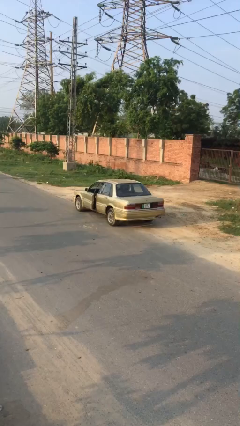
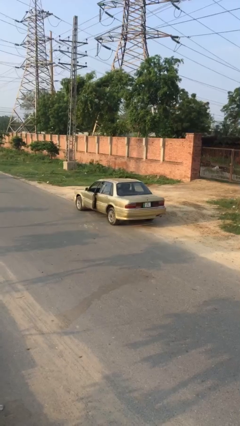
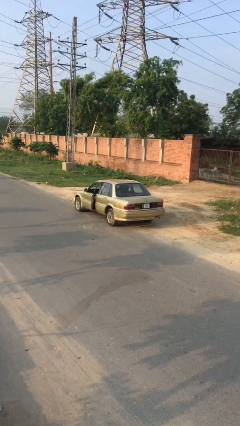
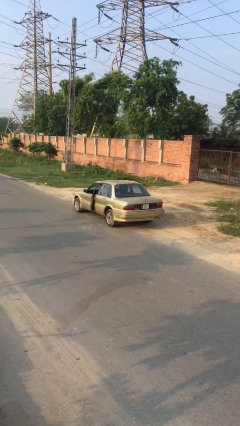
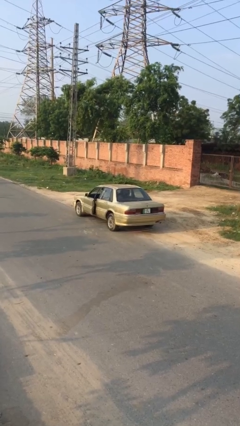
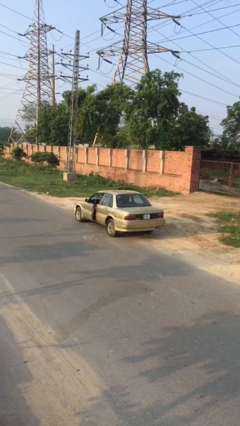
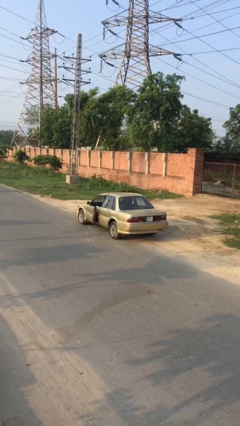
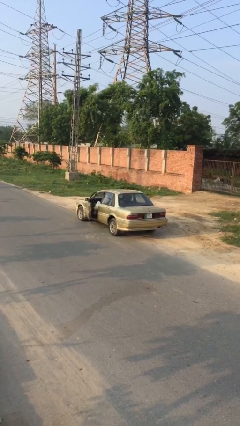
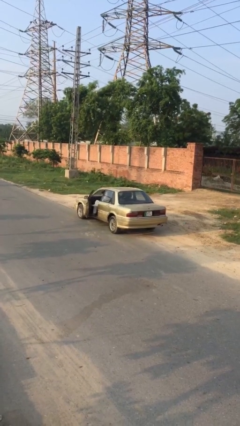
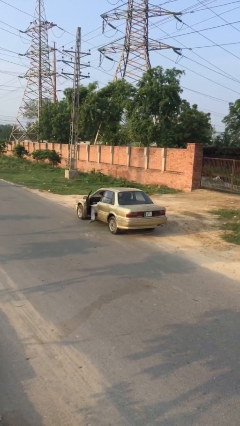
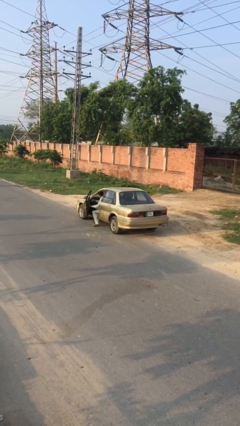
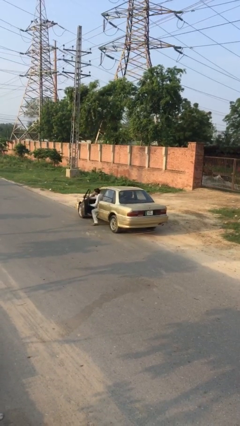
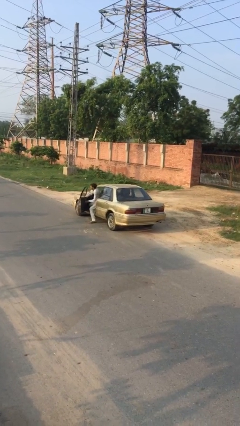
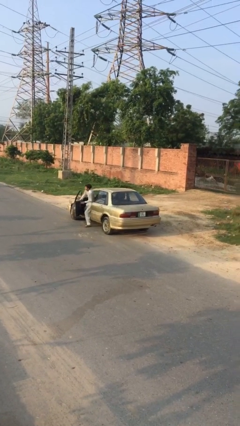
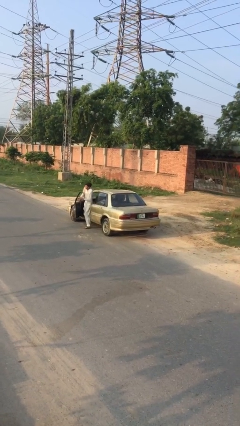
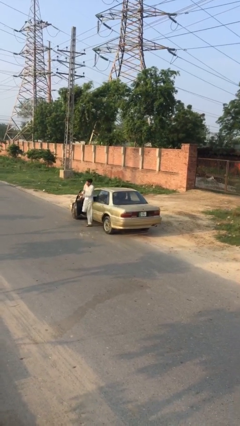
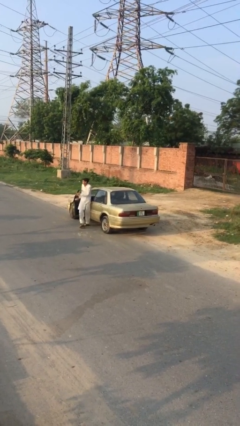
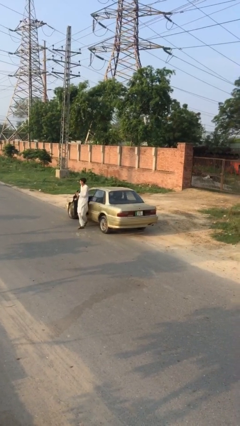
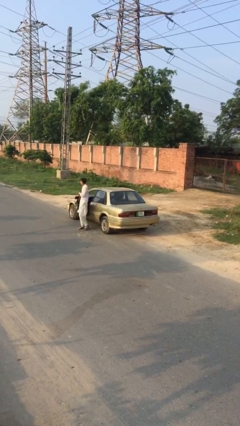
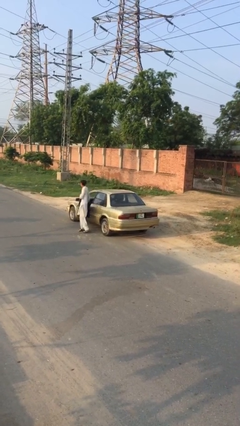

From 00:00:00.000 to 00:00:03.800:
car drops off person

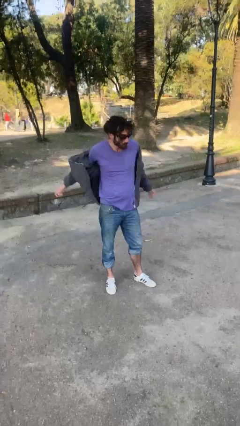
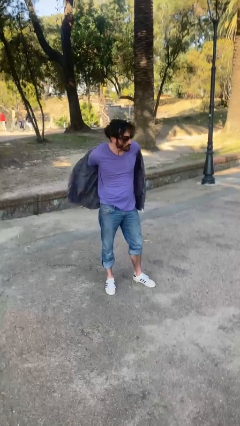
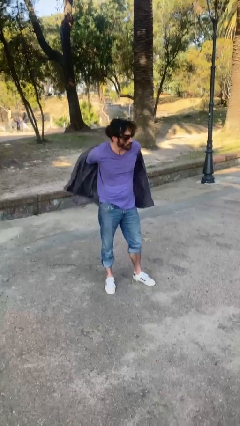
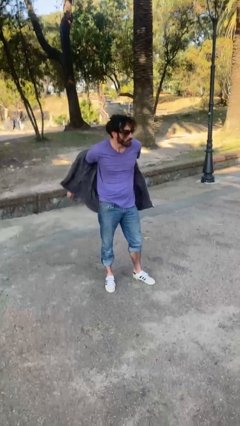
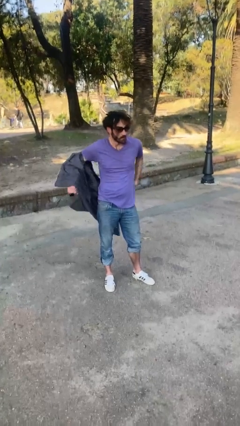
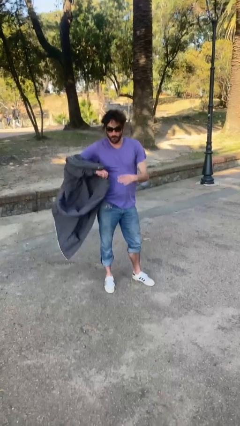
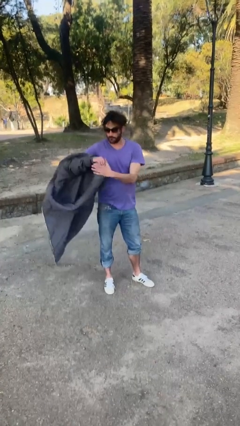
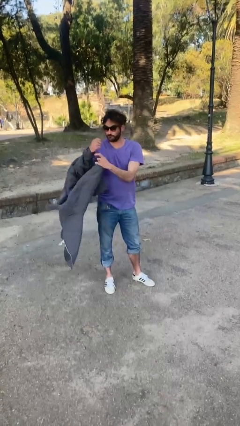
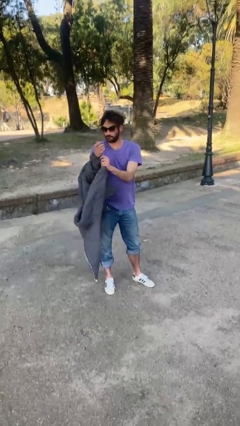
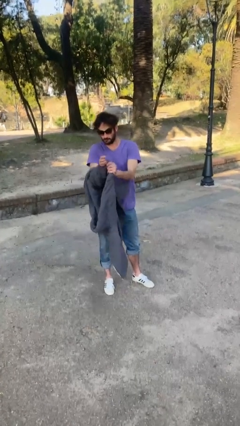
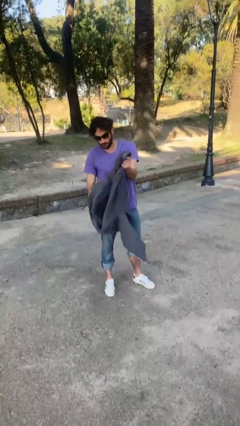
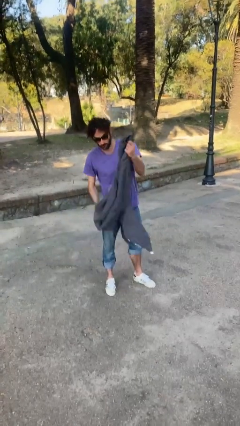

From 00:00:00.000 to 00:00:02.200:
person takes off jacket

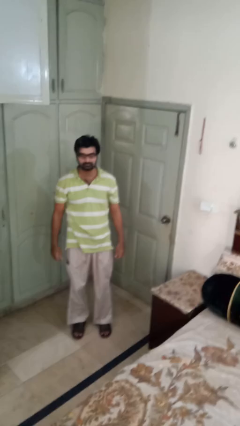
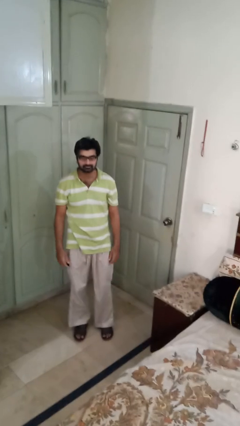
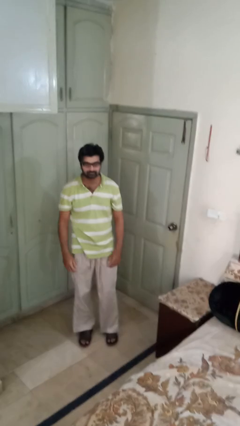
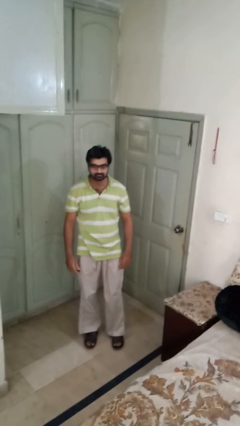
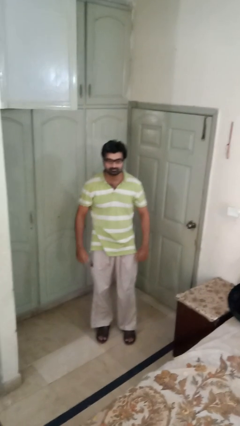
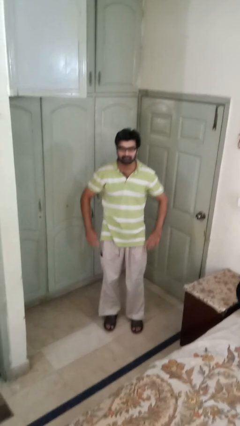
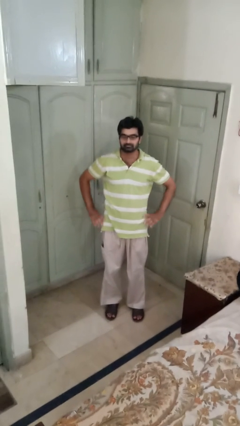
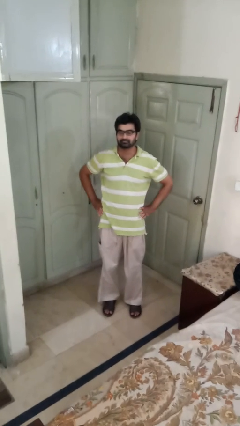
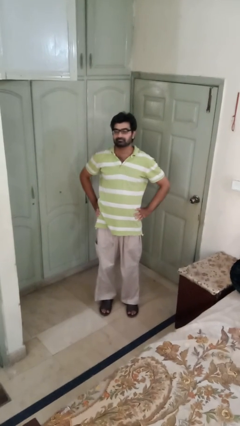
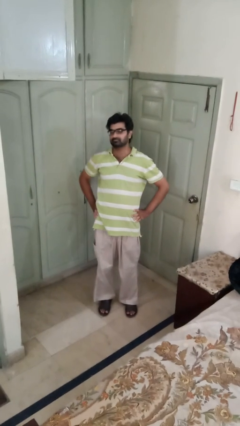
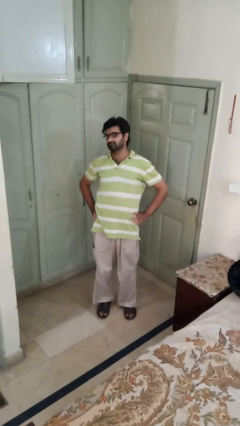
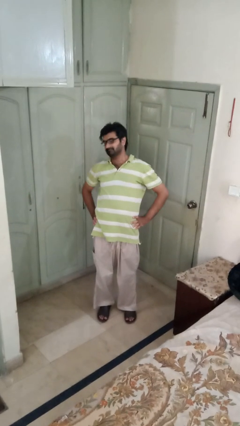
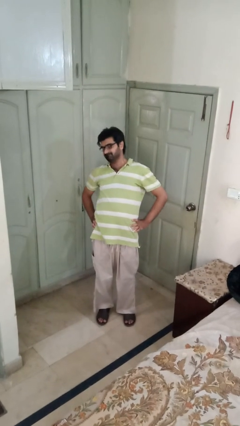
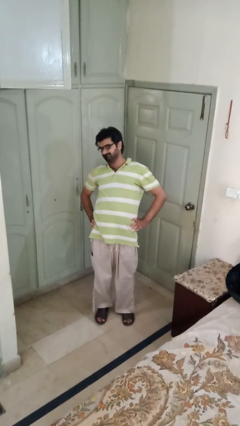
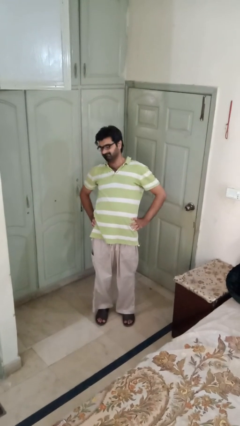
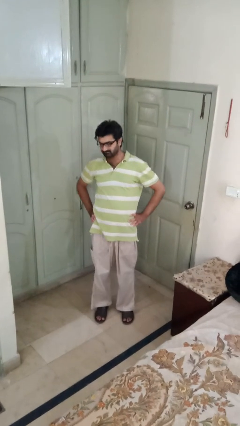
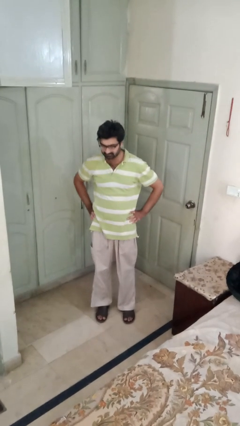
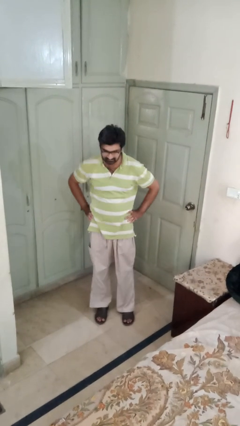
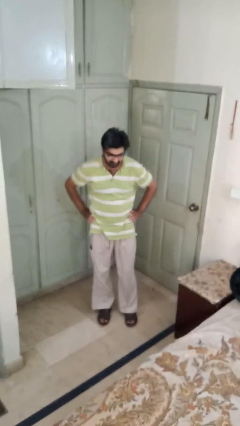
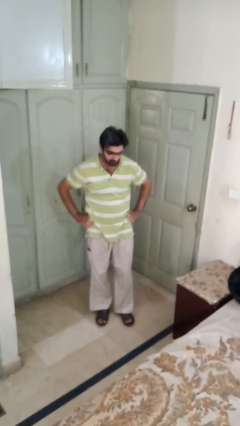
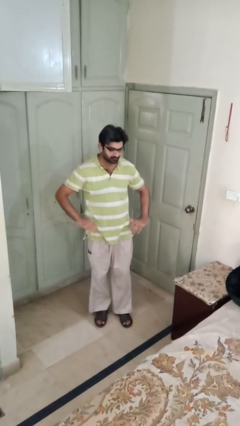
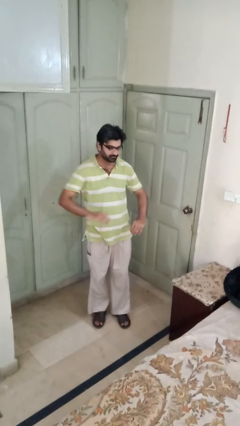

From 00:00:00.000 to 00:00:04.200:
person stretches back

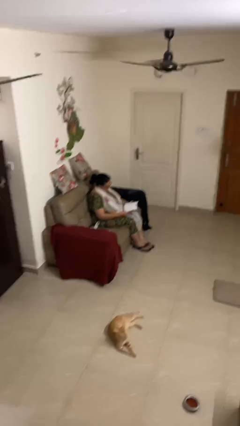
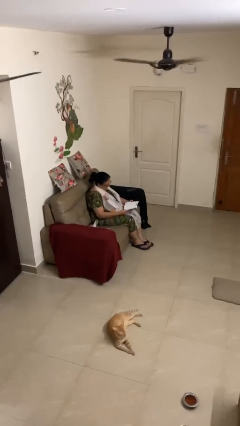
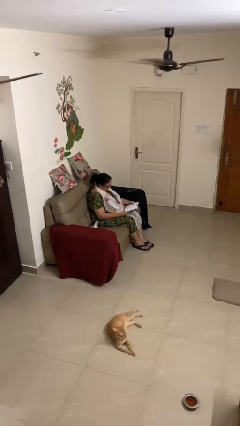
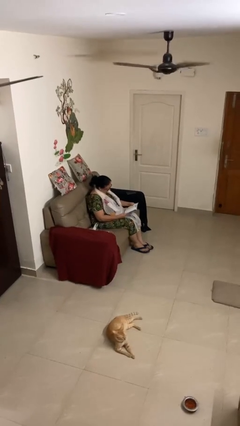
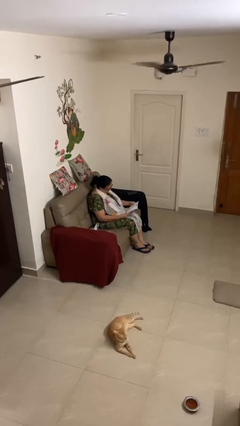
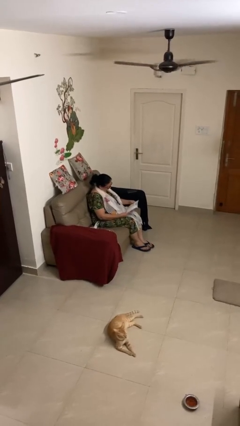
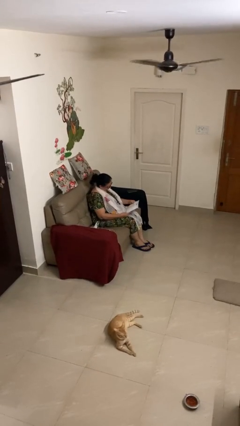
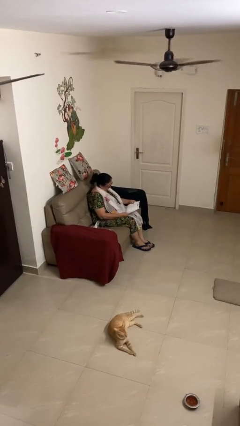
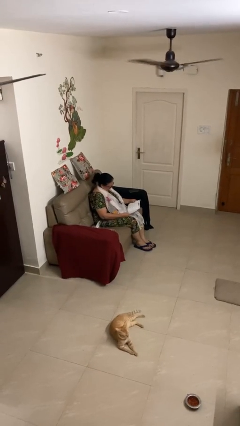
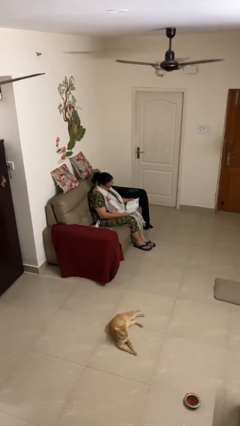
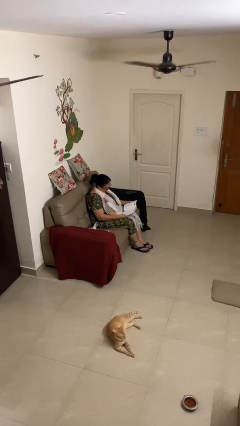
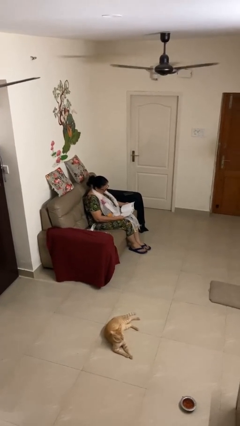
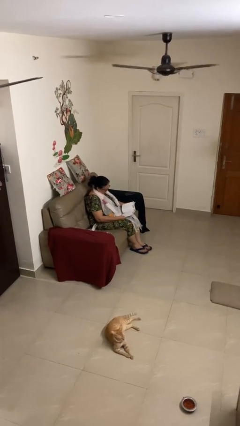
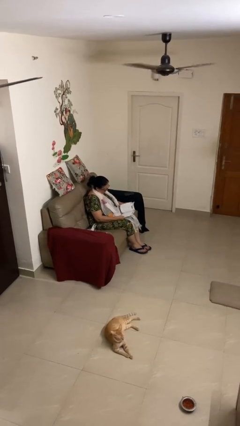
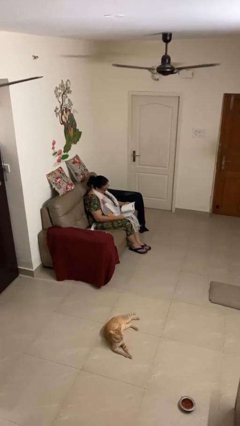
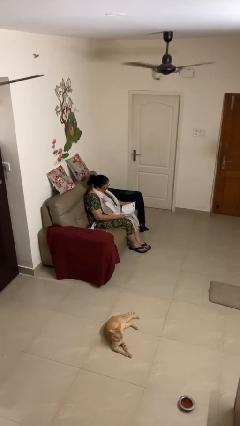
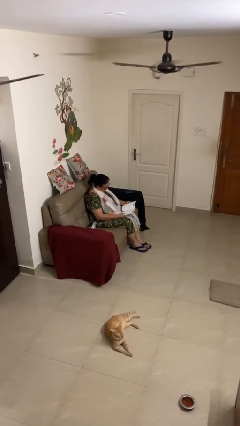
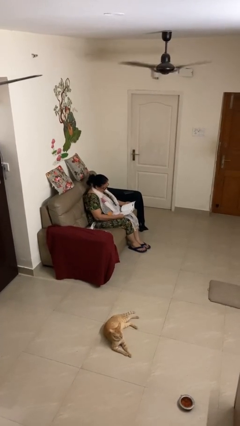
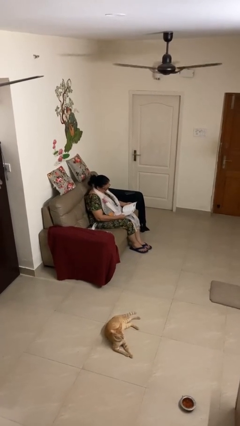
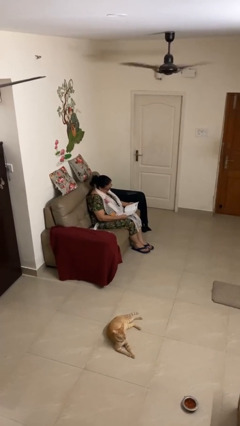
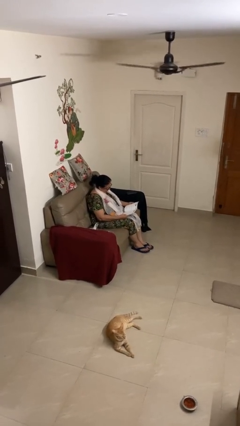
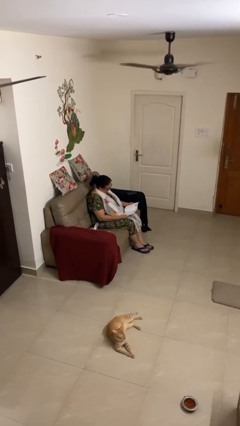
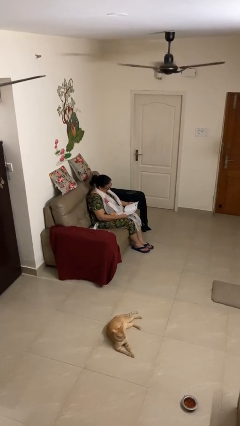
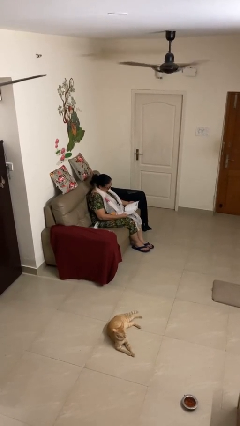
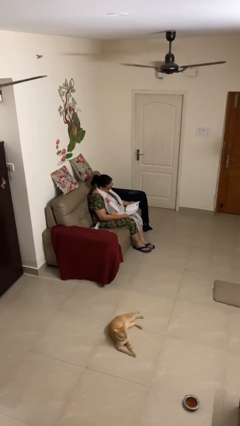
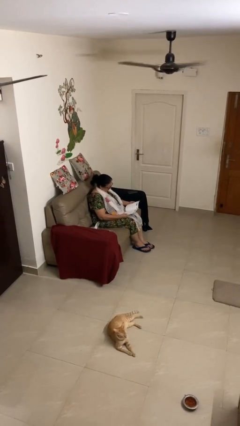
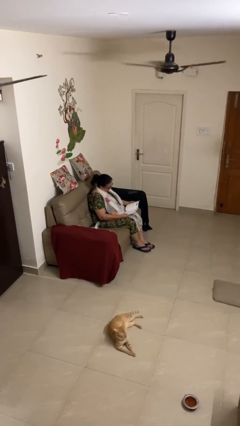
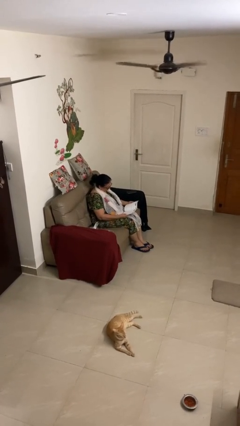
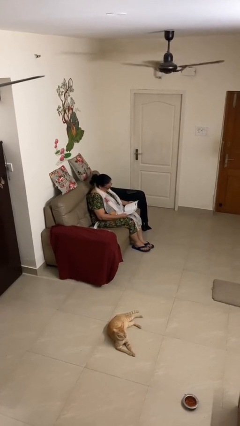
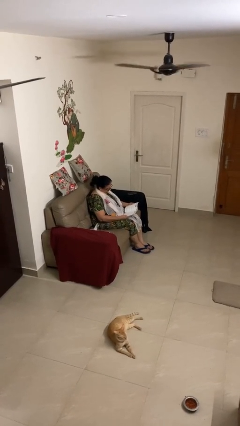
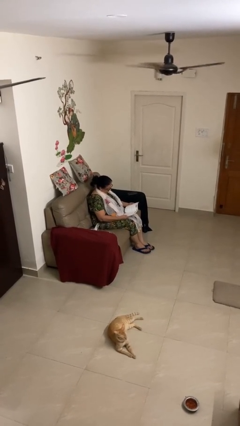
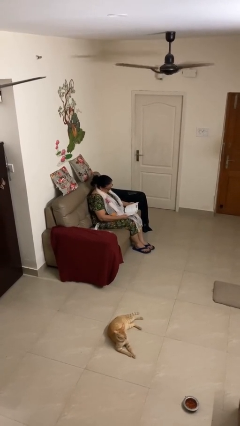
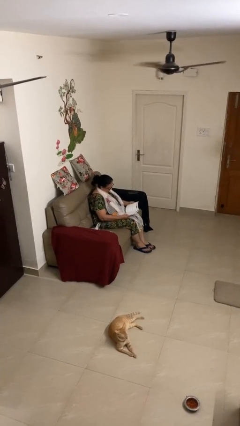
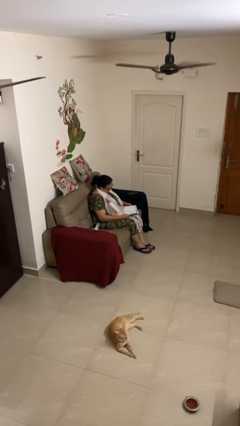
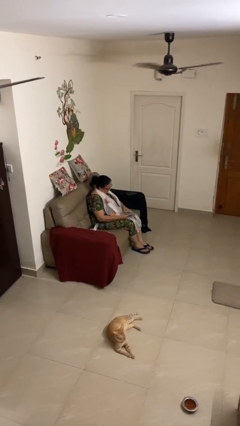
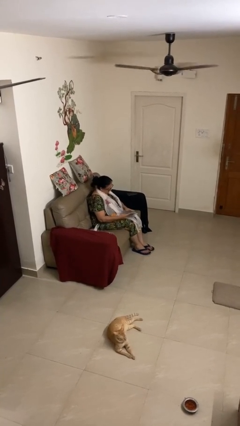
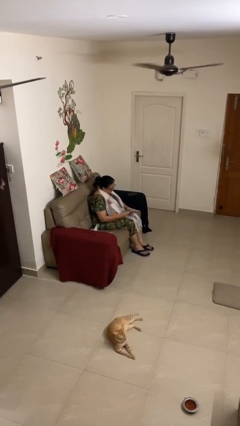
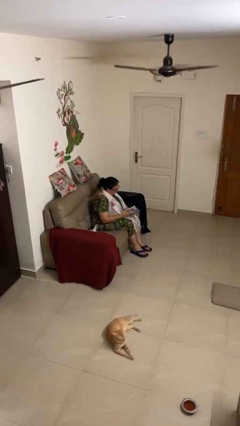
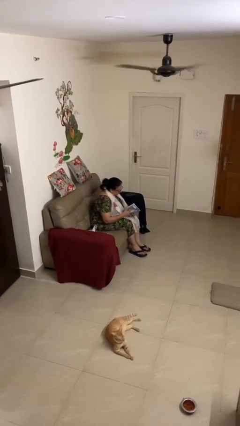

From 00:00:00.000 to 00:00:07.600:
person reads document
